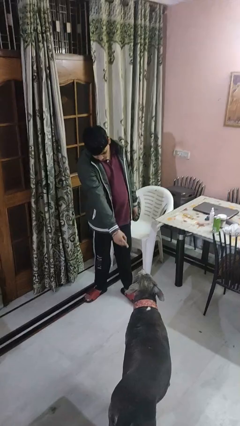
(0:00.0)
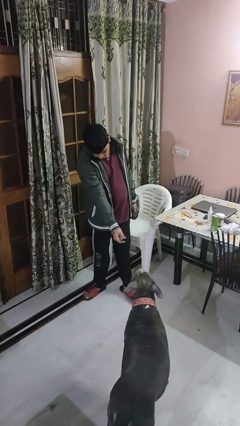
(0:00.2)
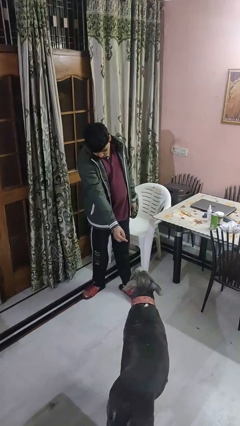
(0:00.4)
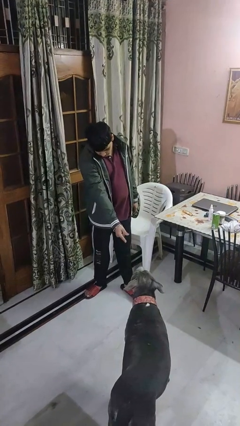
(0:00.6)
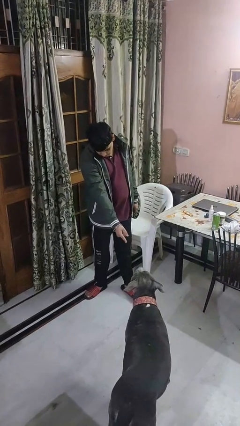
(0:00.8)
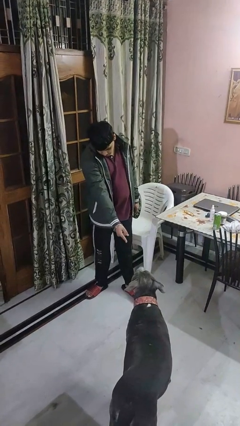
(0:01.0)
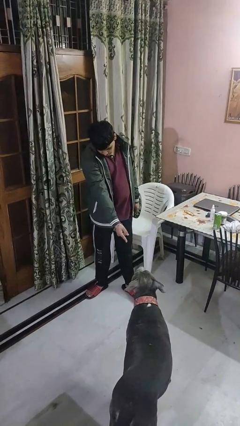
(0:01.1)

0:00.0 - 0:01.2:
person points to dog

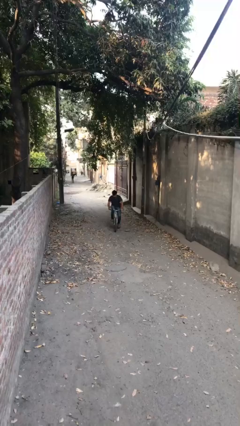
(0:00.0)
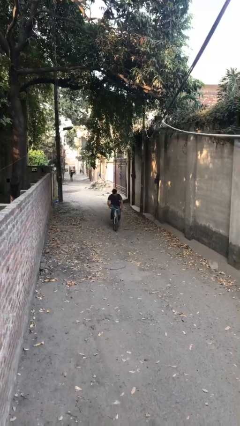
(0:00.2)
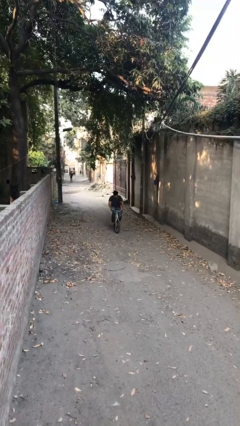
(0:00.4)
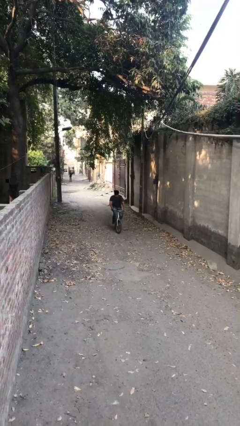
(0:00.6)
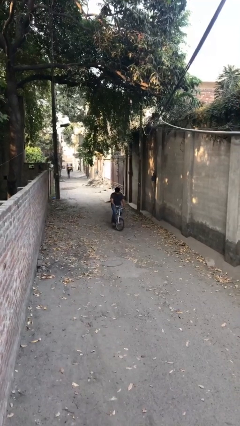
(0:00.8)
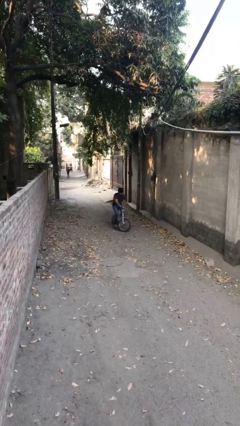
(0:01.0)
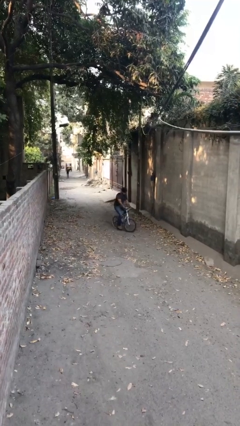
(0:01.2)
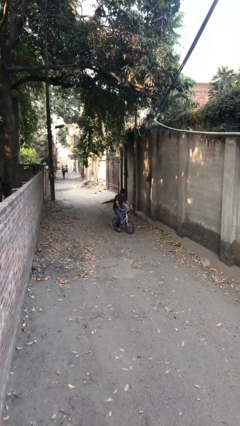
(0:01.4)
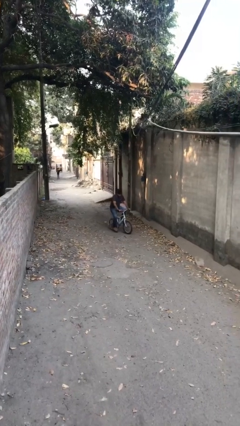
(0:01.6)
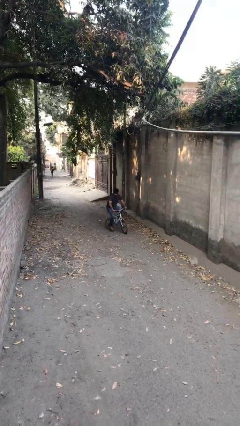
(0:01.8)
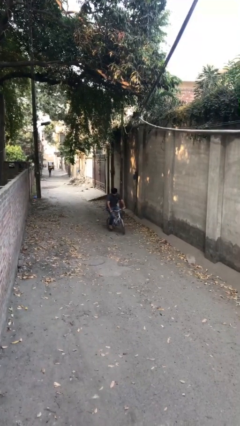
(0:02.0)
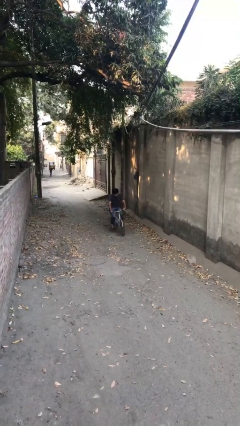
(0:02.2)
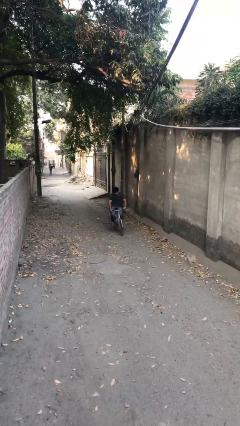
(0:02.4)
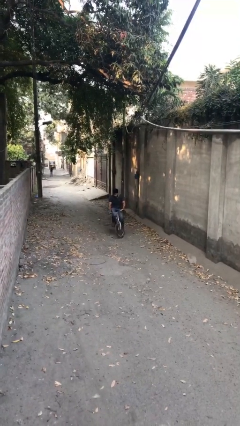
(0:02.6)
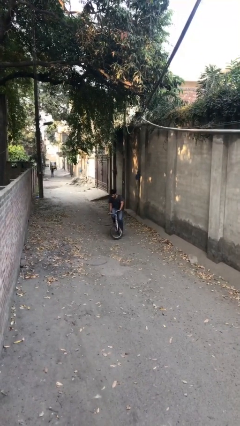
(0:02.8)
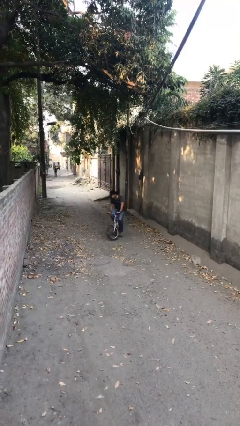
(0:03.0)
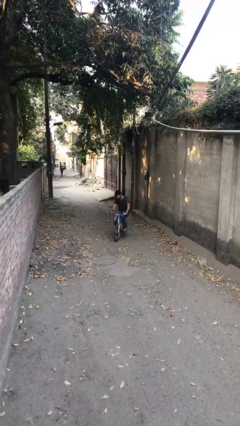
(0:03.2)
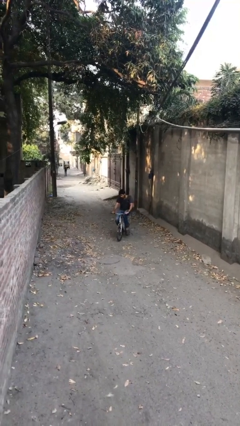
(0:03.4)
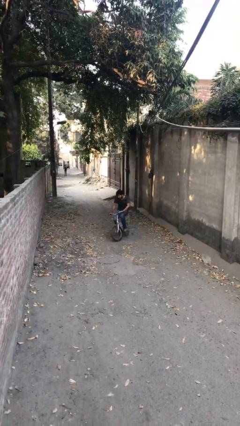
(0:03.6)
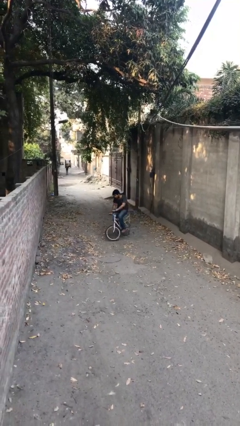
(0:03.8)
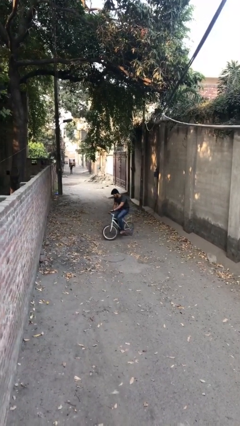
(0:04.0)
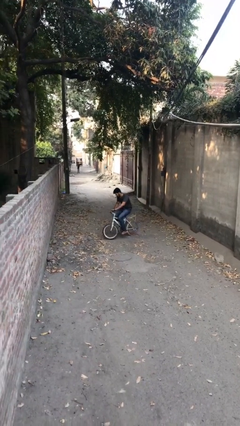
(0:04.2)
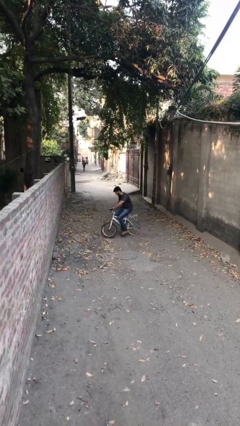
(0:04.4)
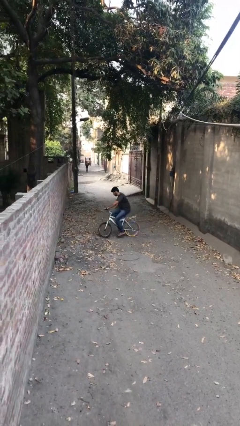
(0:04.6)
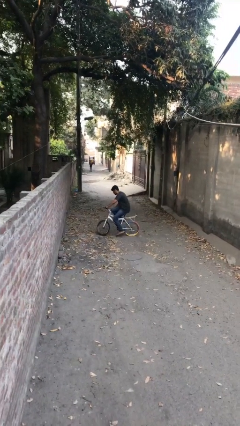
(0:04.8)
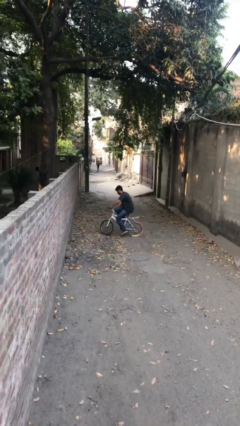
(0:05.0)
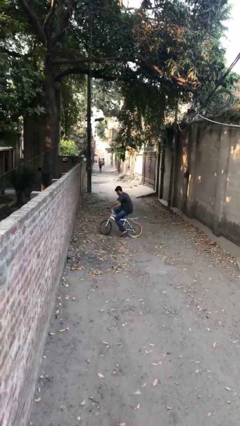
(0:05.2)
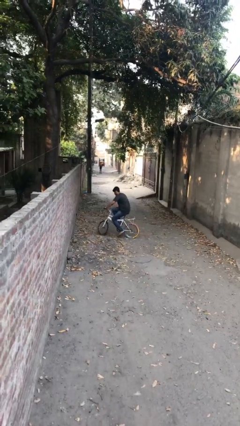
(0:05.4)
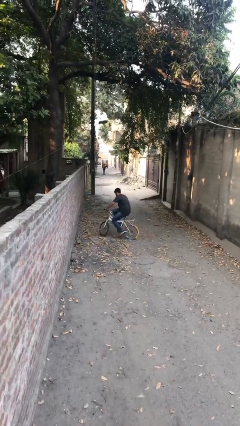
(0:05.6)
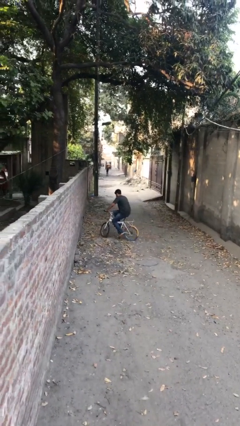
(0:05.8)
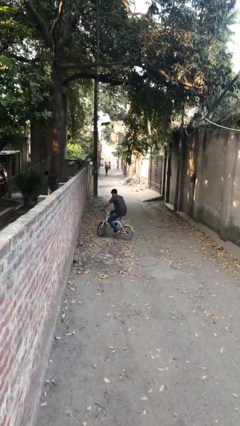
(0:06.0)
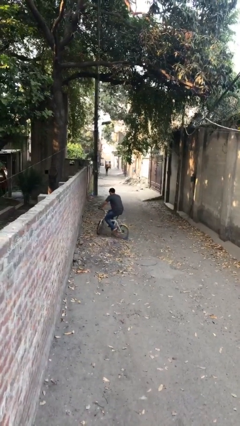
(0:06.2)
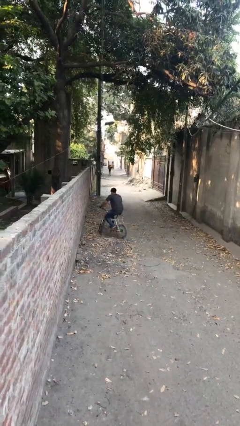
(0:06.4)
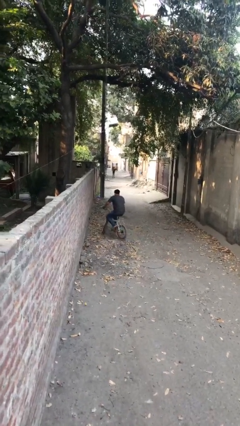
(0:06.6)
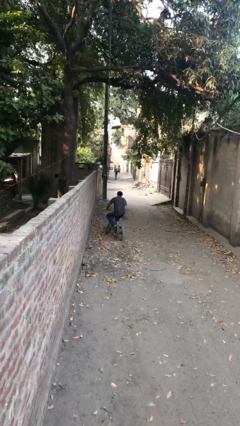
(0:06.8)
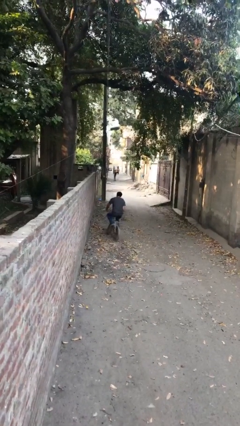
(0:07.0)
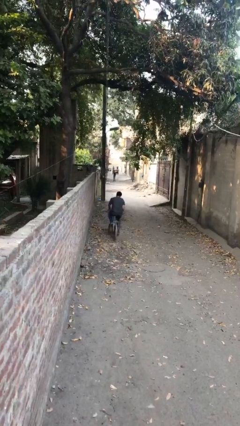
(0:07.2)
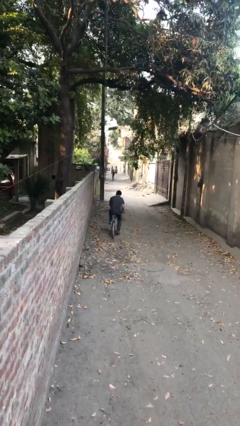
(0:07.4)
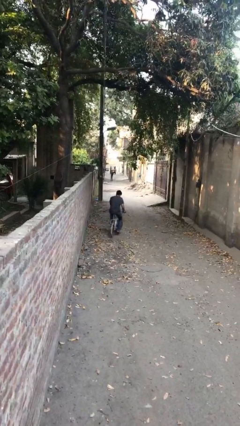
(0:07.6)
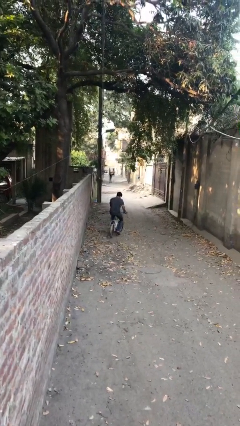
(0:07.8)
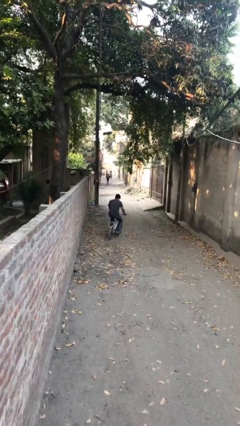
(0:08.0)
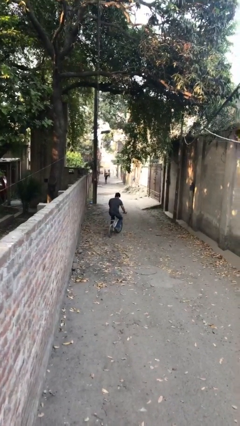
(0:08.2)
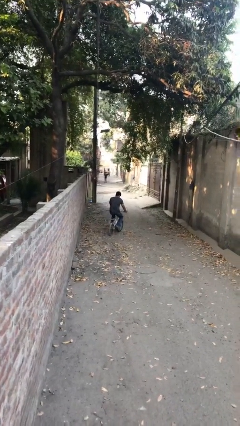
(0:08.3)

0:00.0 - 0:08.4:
person rides bicycle

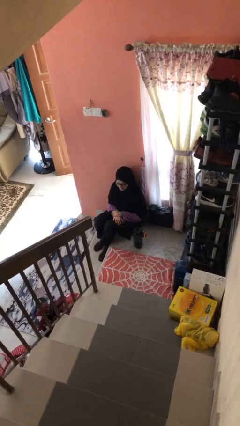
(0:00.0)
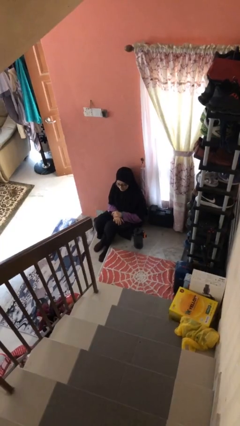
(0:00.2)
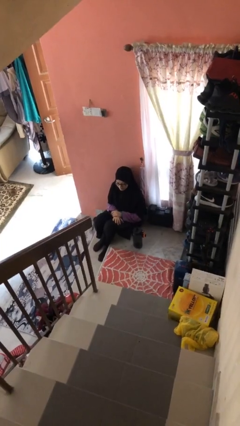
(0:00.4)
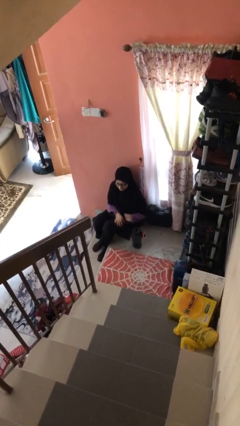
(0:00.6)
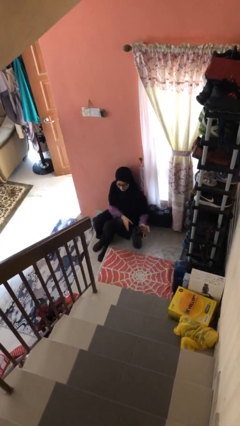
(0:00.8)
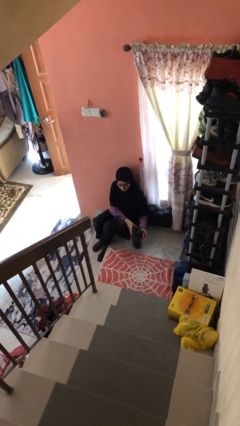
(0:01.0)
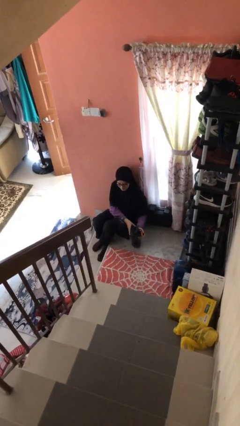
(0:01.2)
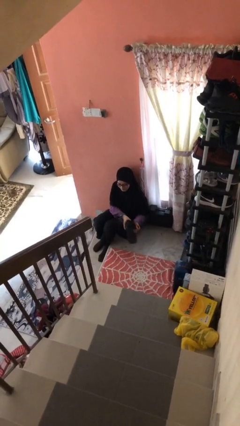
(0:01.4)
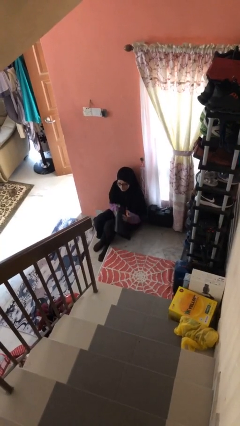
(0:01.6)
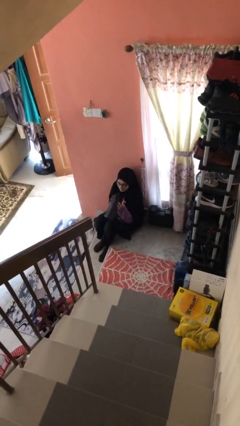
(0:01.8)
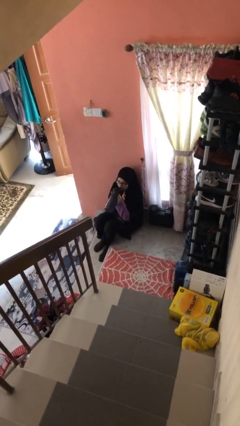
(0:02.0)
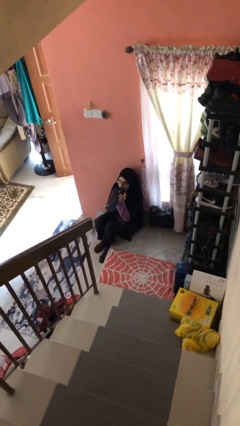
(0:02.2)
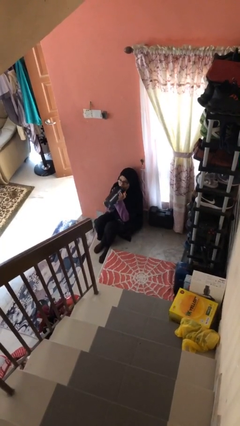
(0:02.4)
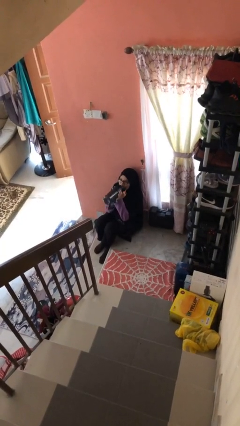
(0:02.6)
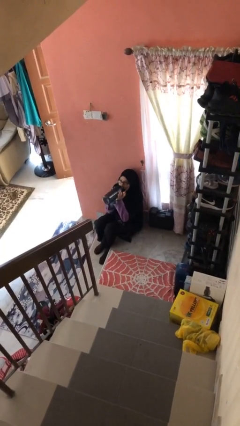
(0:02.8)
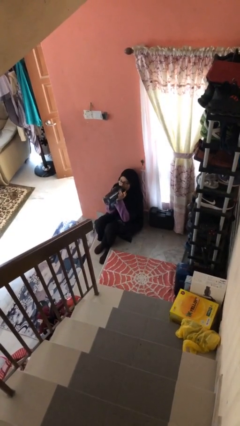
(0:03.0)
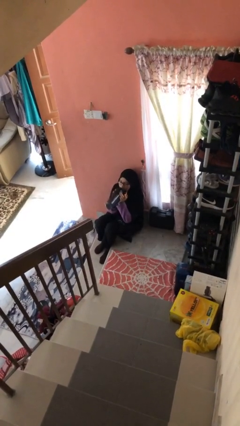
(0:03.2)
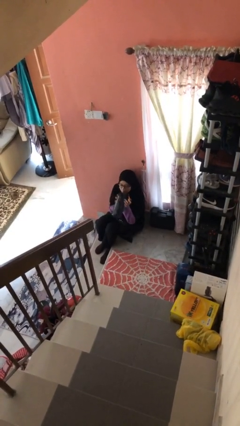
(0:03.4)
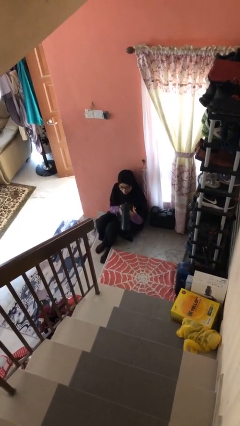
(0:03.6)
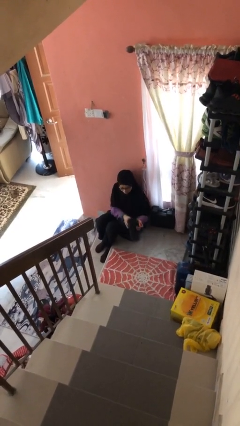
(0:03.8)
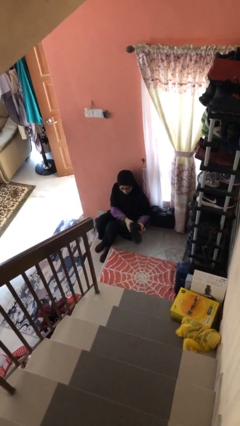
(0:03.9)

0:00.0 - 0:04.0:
person drinks from bottle

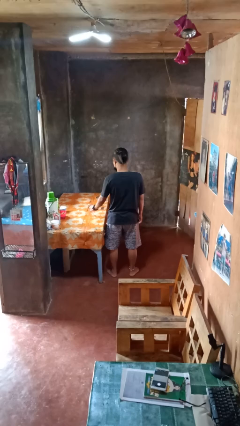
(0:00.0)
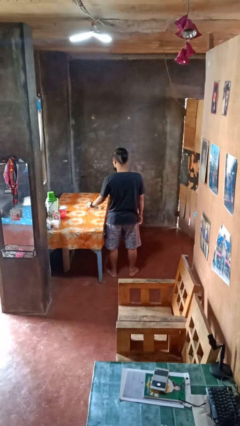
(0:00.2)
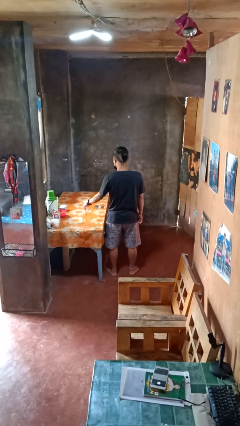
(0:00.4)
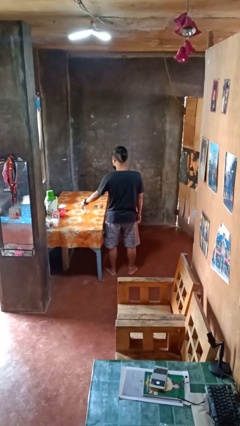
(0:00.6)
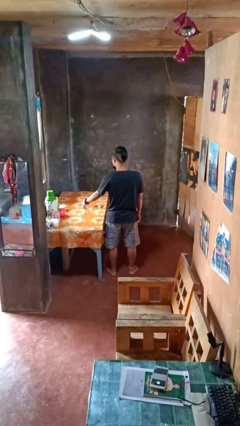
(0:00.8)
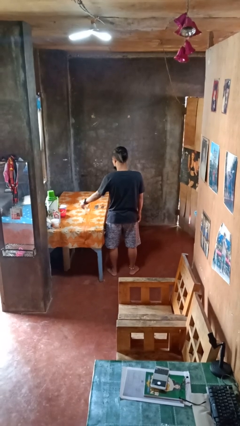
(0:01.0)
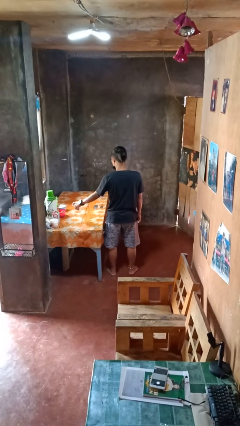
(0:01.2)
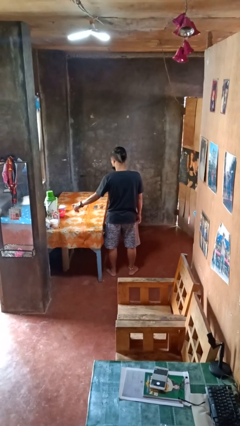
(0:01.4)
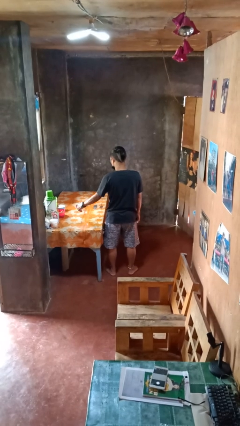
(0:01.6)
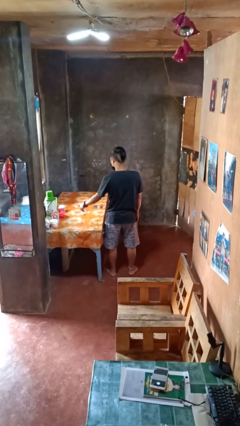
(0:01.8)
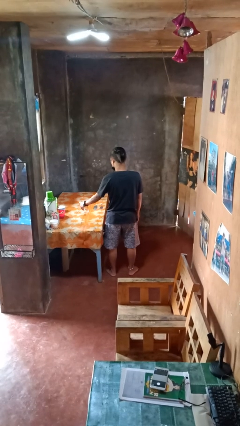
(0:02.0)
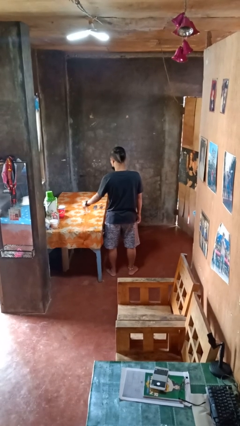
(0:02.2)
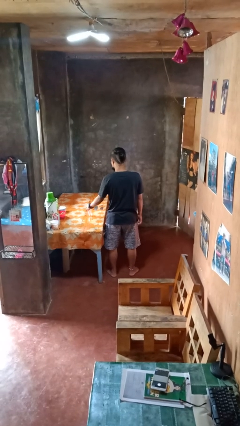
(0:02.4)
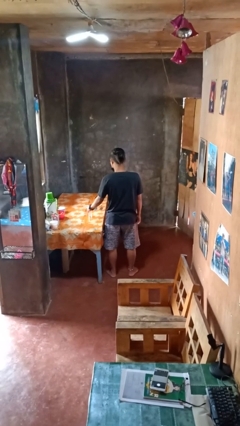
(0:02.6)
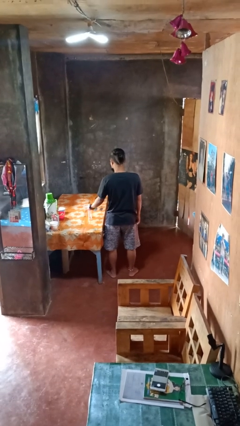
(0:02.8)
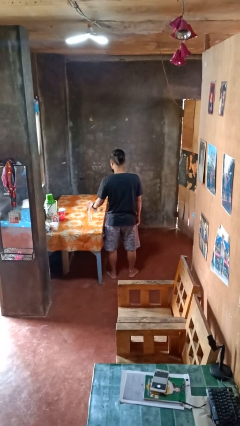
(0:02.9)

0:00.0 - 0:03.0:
person sprays from bottle

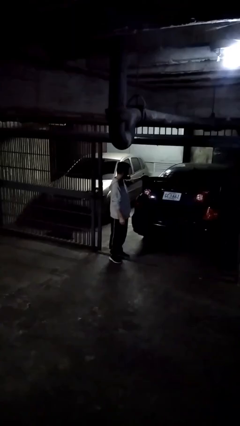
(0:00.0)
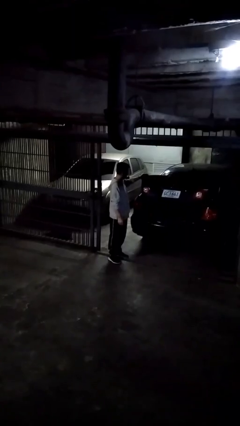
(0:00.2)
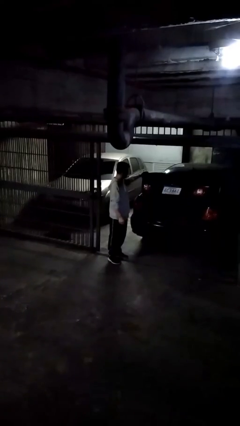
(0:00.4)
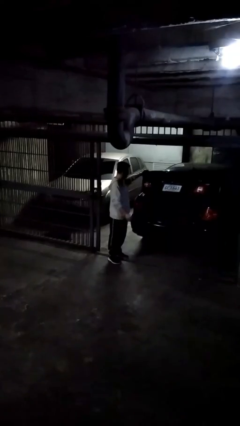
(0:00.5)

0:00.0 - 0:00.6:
person opens car trunk

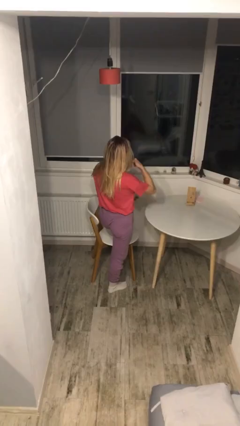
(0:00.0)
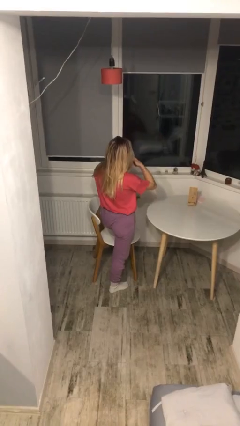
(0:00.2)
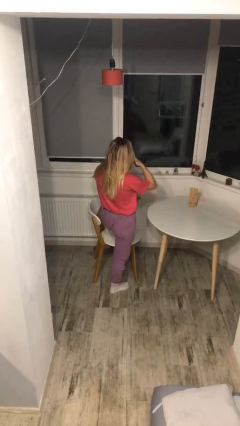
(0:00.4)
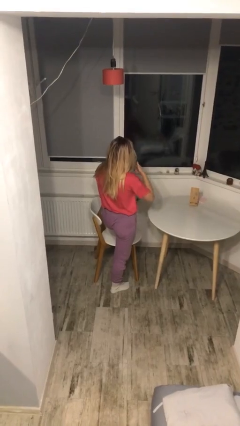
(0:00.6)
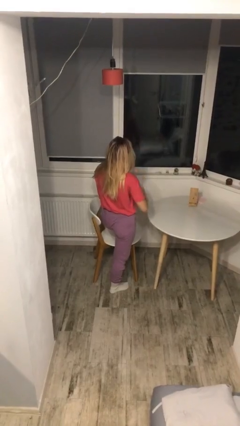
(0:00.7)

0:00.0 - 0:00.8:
person gestures number five
